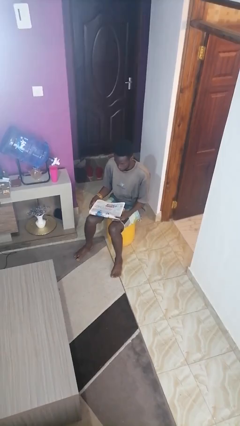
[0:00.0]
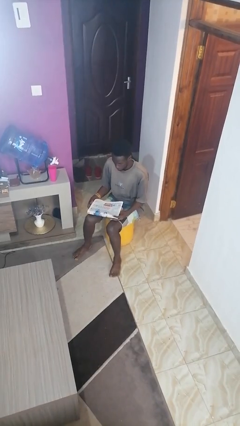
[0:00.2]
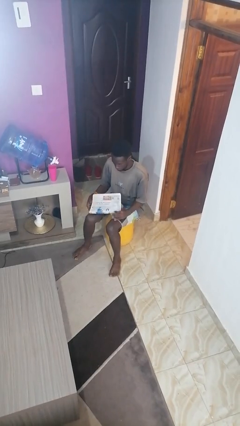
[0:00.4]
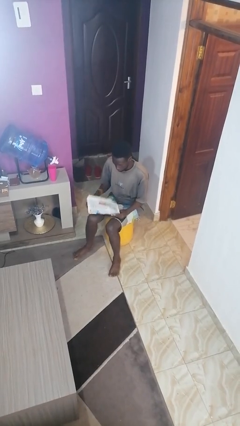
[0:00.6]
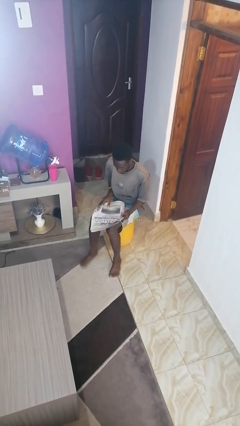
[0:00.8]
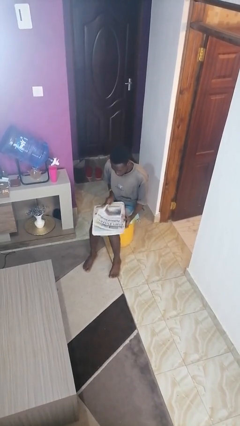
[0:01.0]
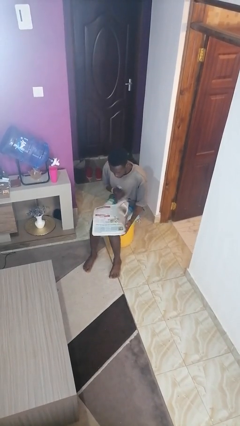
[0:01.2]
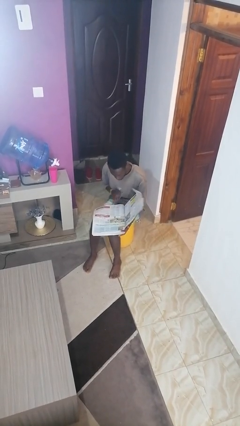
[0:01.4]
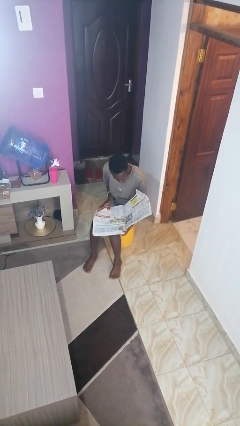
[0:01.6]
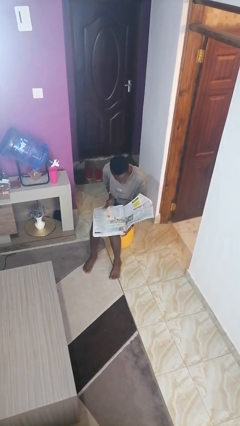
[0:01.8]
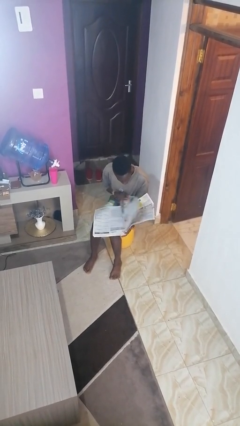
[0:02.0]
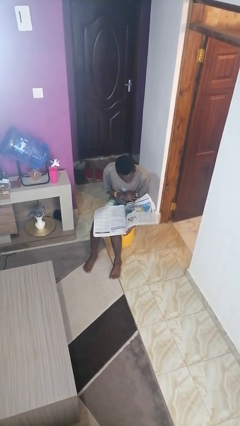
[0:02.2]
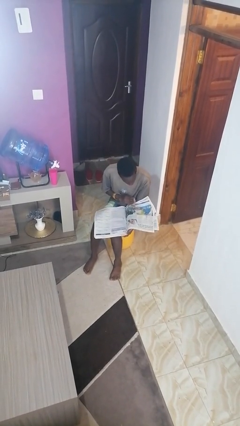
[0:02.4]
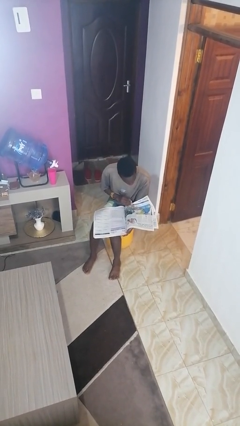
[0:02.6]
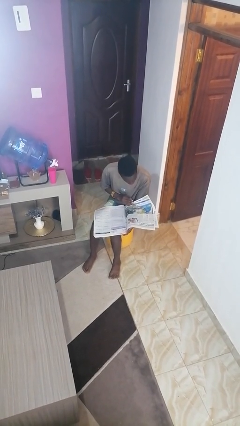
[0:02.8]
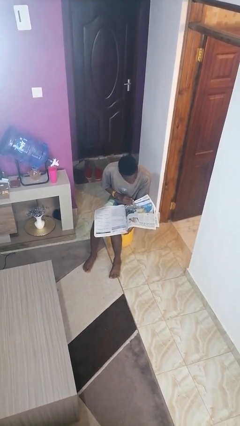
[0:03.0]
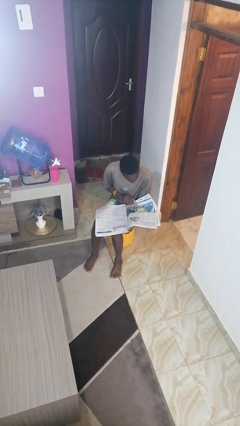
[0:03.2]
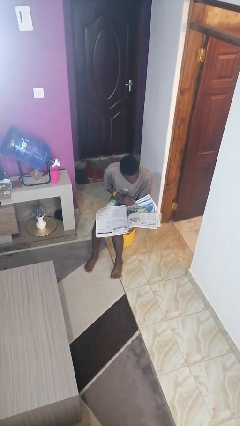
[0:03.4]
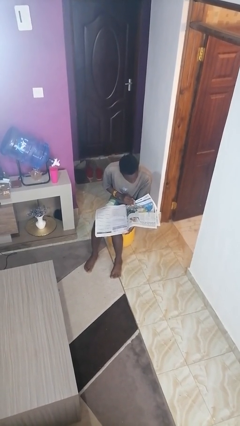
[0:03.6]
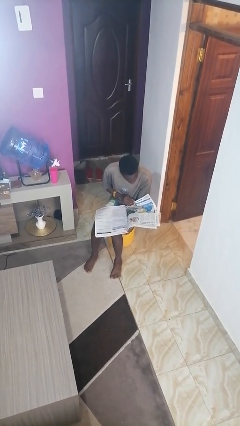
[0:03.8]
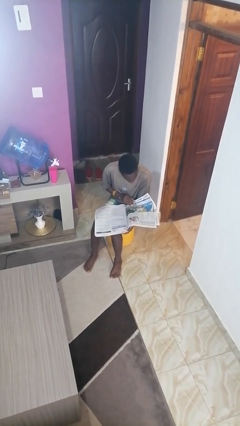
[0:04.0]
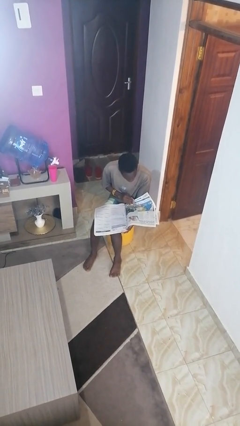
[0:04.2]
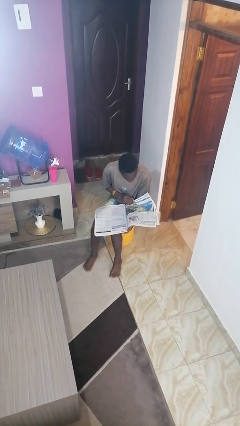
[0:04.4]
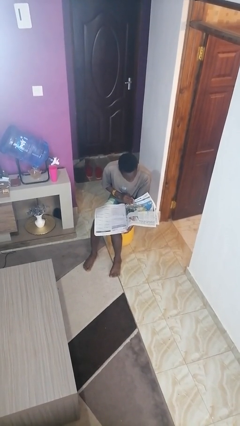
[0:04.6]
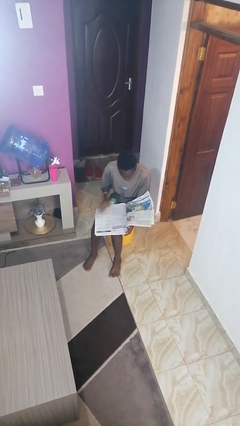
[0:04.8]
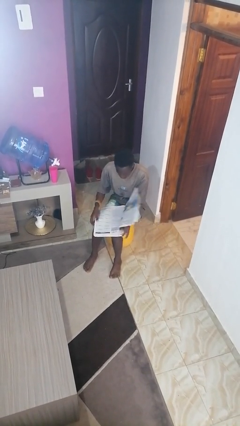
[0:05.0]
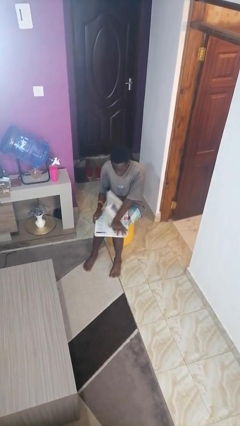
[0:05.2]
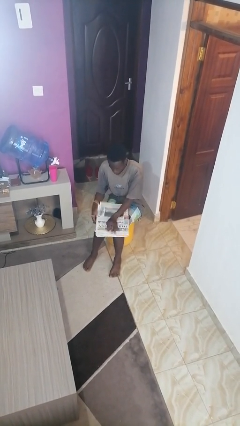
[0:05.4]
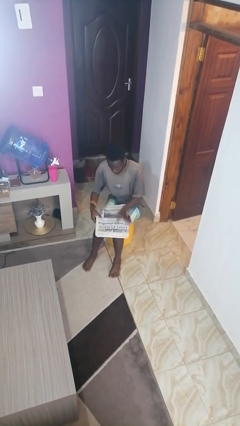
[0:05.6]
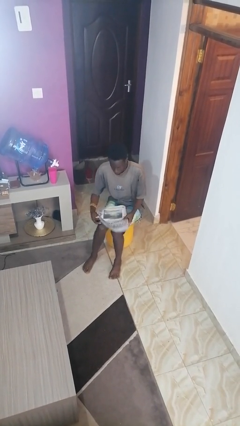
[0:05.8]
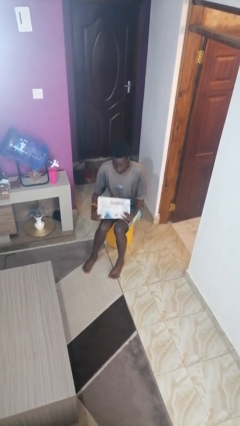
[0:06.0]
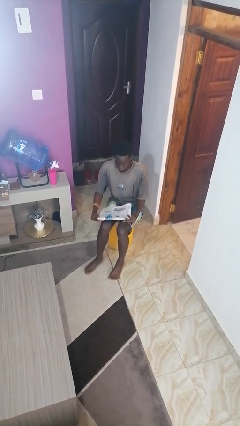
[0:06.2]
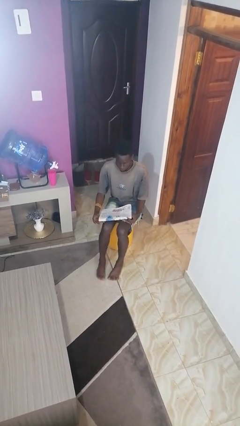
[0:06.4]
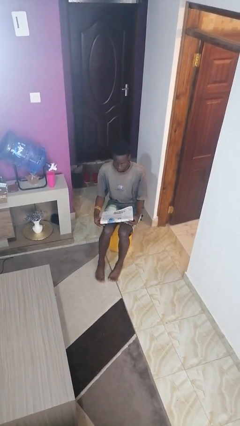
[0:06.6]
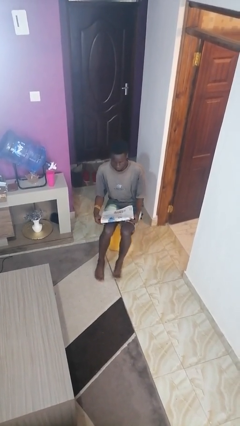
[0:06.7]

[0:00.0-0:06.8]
person reads newspaper

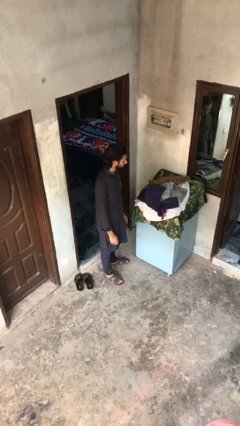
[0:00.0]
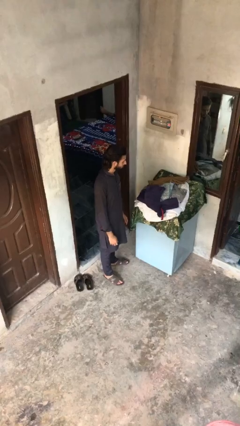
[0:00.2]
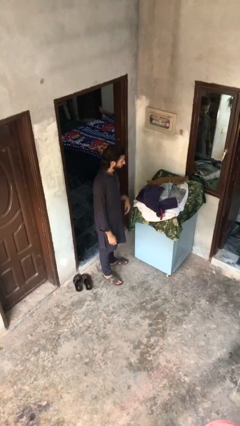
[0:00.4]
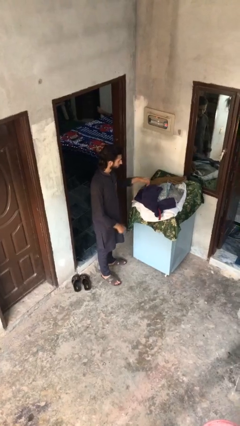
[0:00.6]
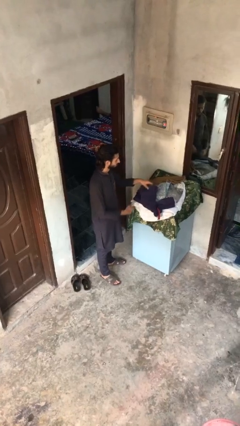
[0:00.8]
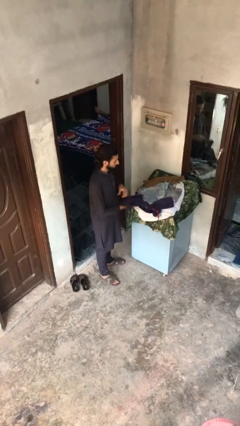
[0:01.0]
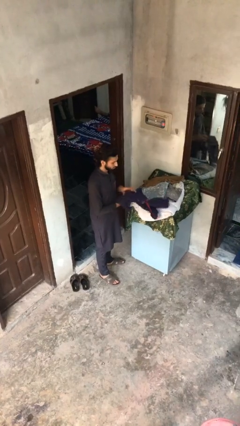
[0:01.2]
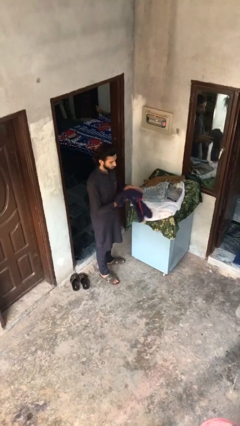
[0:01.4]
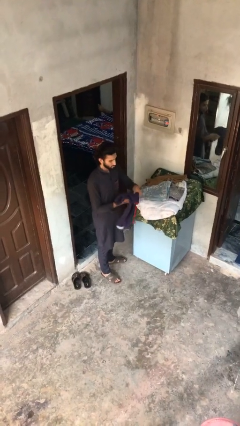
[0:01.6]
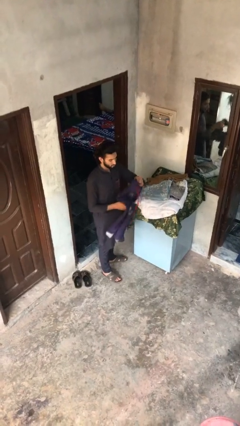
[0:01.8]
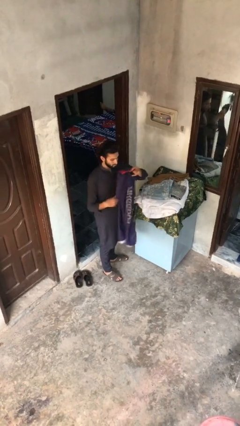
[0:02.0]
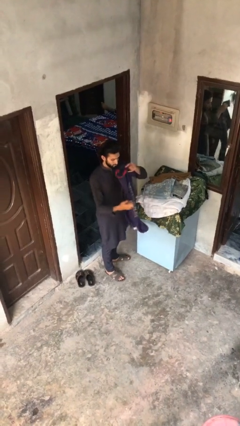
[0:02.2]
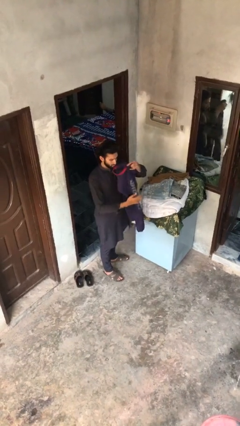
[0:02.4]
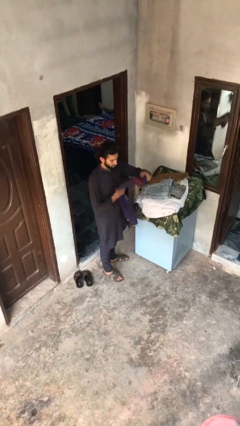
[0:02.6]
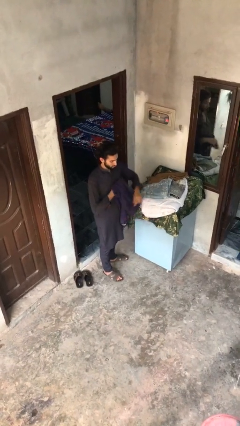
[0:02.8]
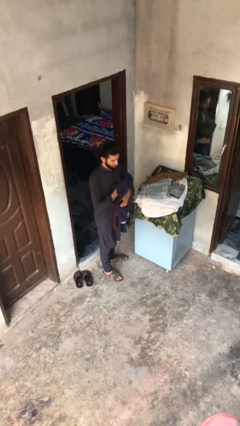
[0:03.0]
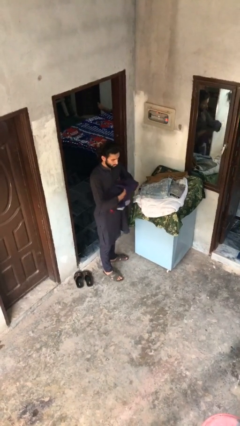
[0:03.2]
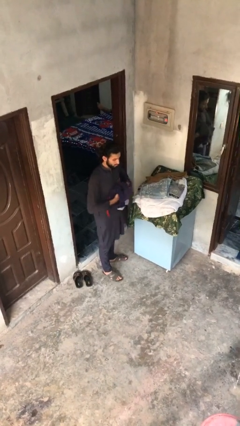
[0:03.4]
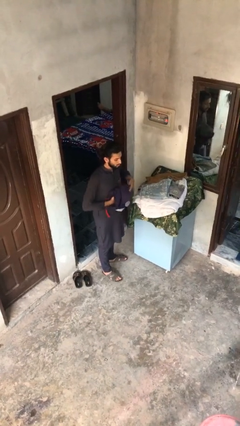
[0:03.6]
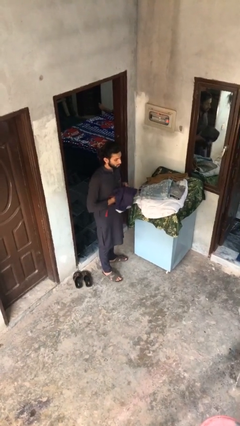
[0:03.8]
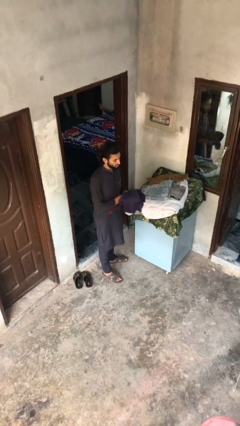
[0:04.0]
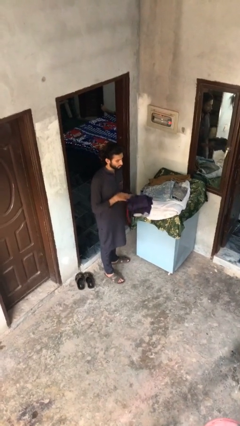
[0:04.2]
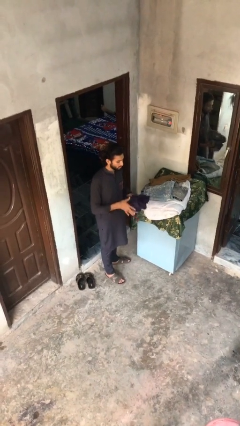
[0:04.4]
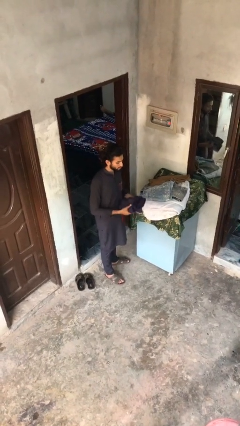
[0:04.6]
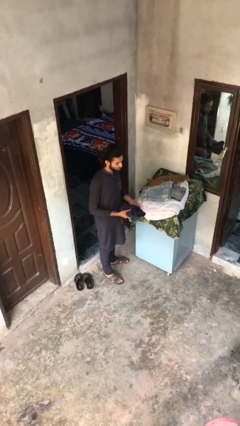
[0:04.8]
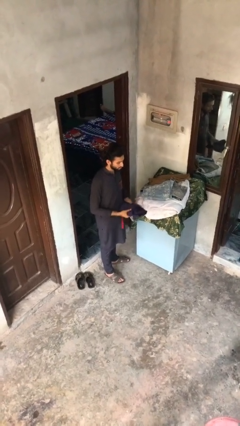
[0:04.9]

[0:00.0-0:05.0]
person folds pants

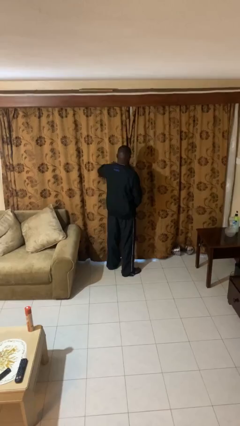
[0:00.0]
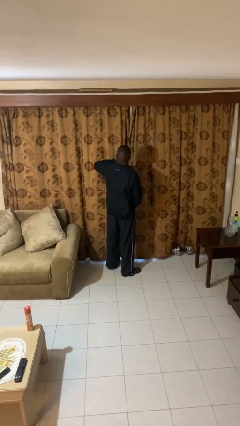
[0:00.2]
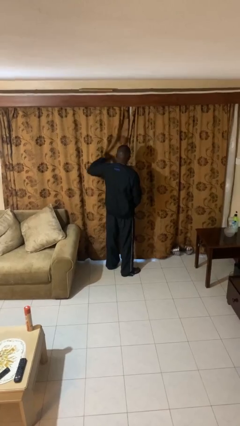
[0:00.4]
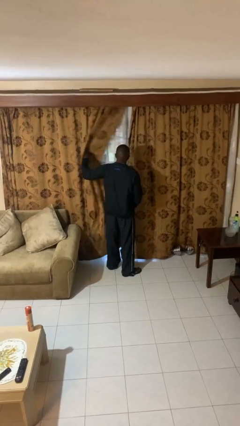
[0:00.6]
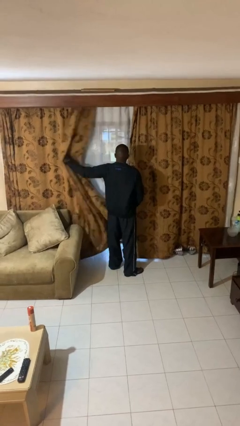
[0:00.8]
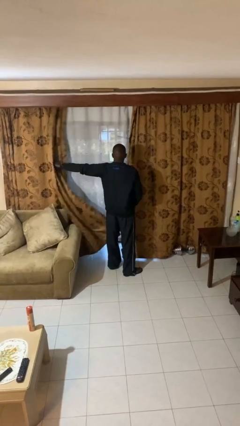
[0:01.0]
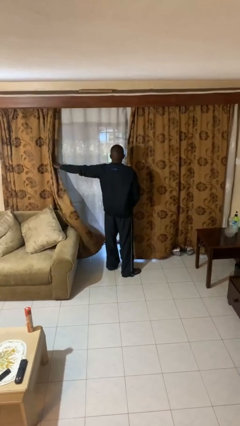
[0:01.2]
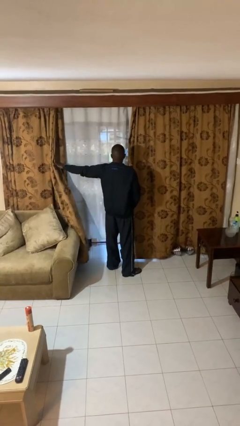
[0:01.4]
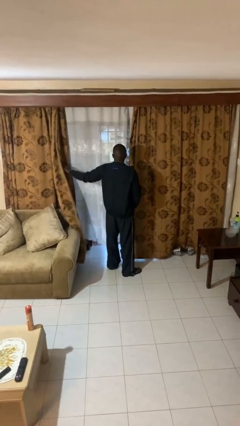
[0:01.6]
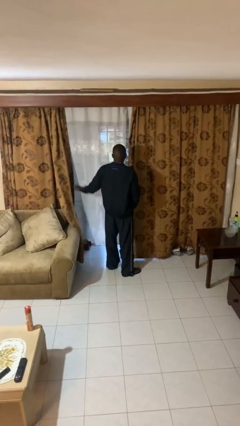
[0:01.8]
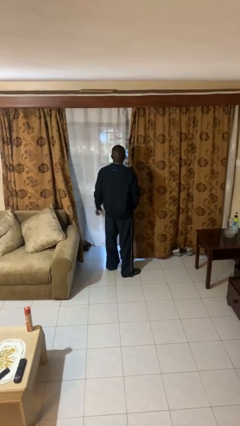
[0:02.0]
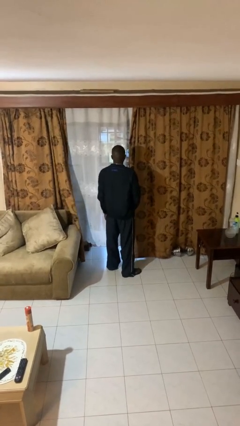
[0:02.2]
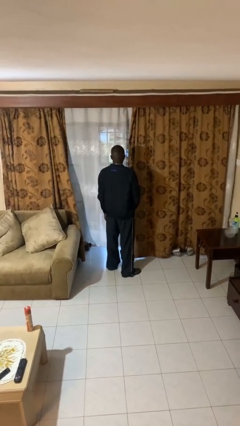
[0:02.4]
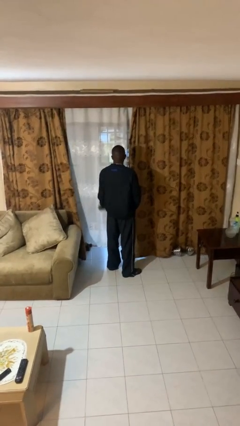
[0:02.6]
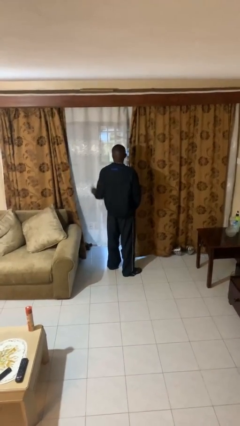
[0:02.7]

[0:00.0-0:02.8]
person opens curtains

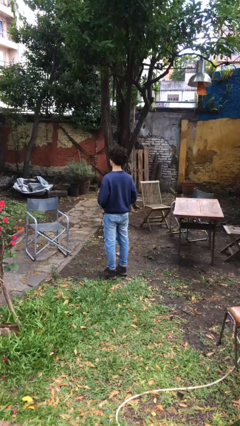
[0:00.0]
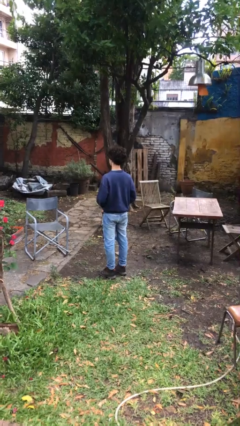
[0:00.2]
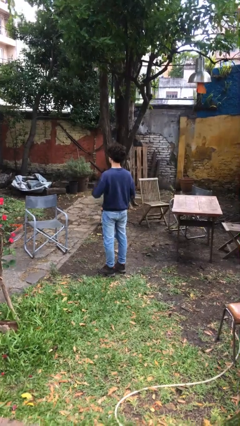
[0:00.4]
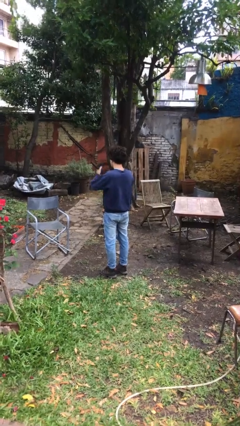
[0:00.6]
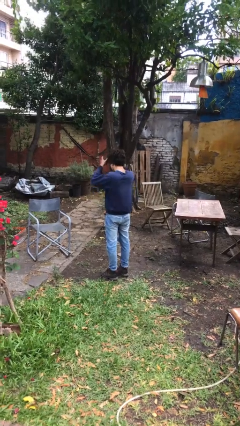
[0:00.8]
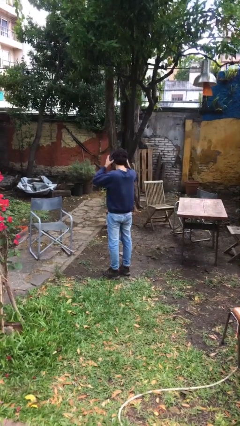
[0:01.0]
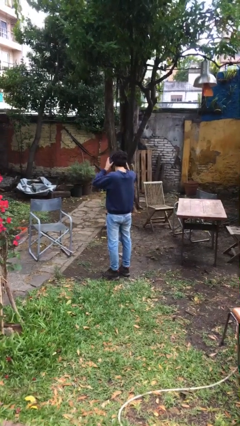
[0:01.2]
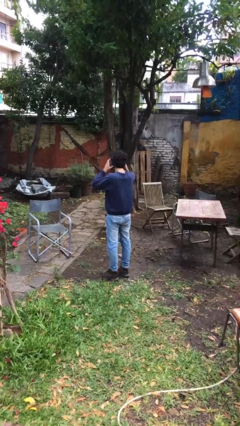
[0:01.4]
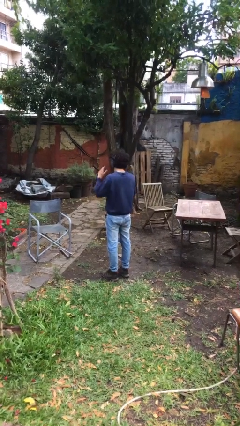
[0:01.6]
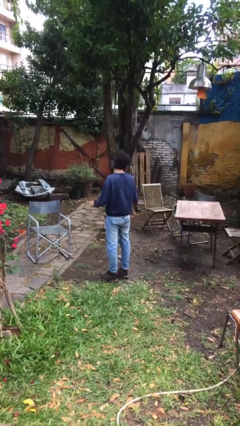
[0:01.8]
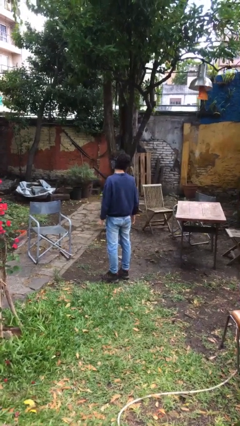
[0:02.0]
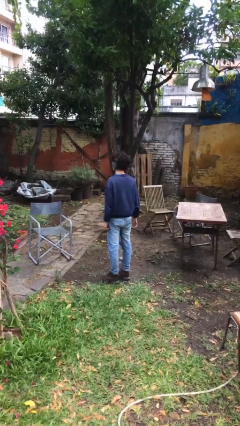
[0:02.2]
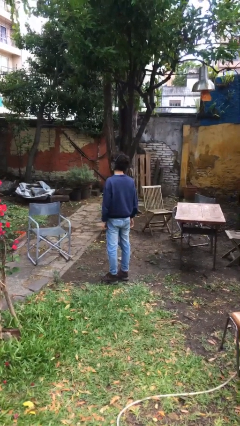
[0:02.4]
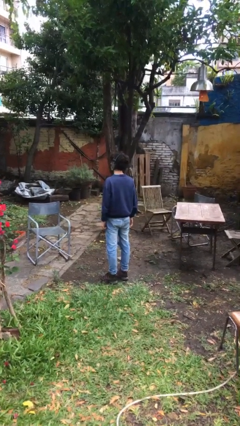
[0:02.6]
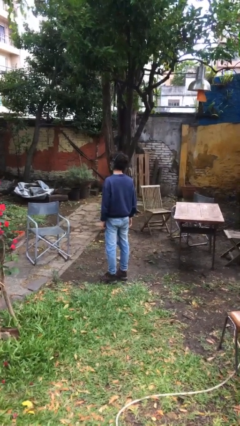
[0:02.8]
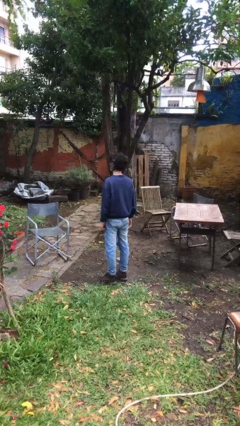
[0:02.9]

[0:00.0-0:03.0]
person puts on headphones
